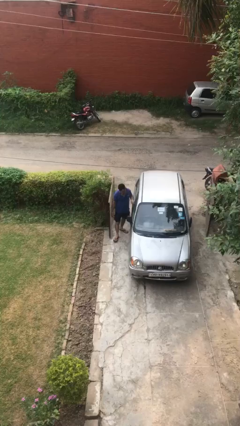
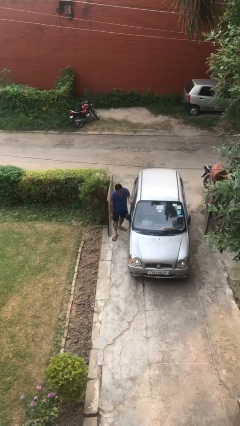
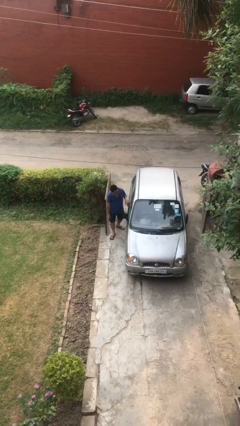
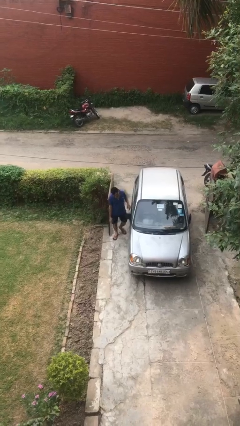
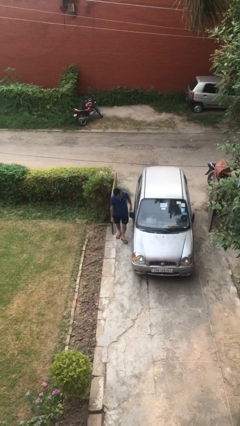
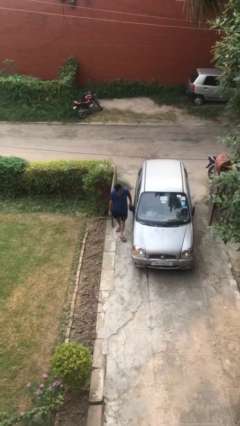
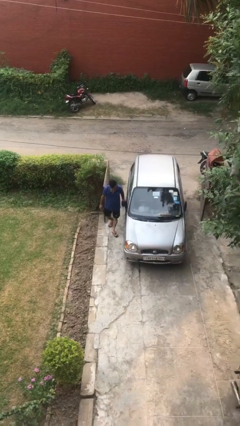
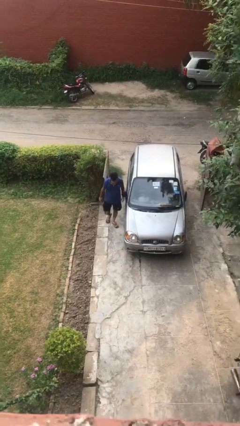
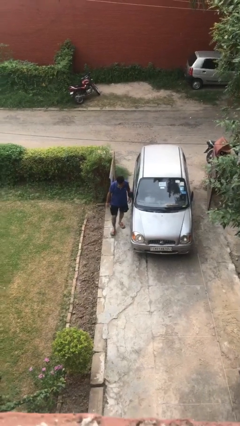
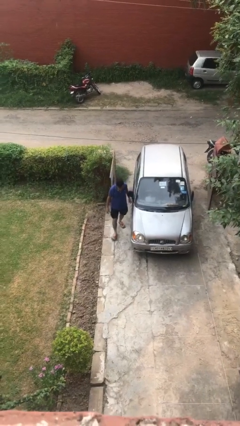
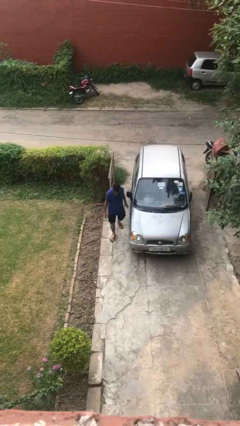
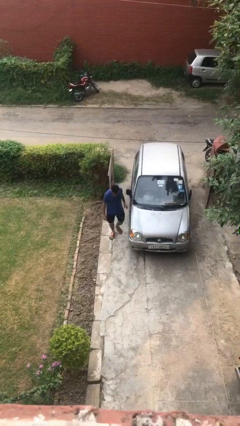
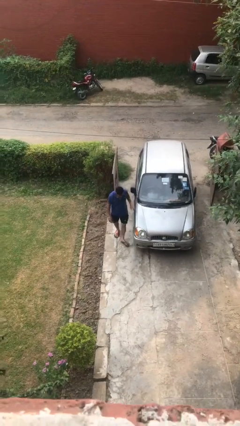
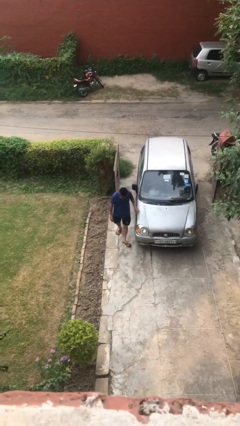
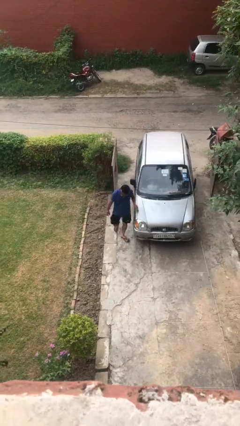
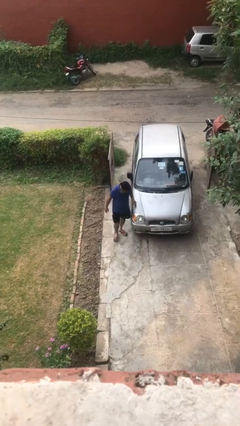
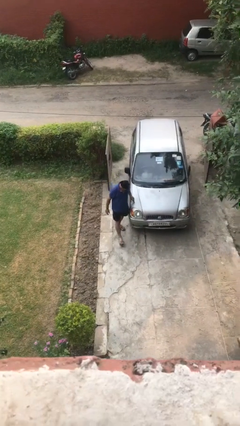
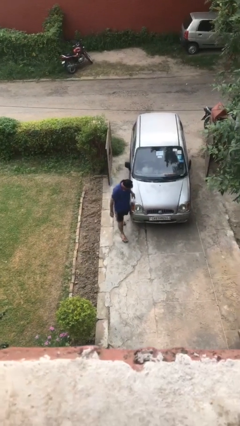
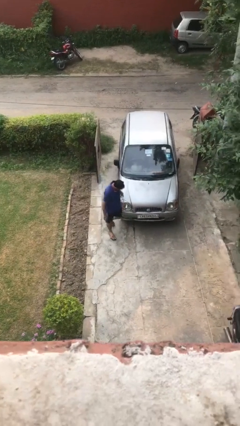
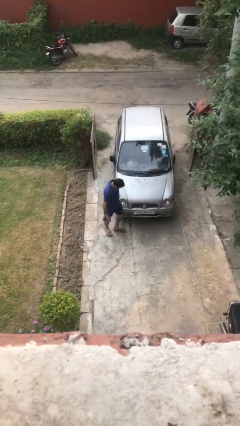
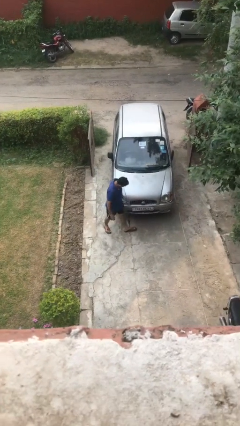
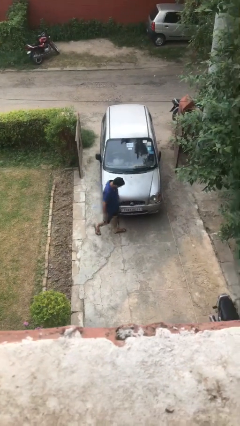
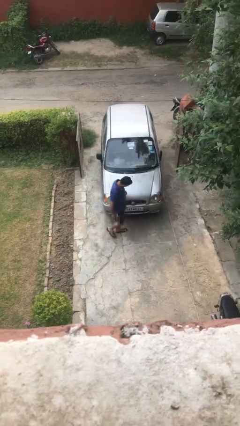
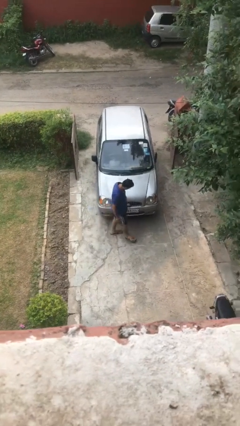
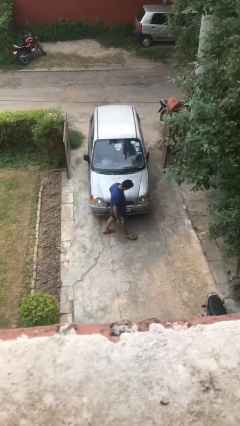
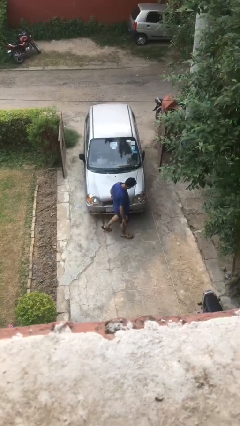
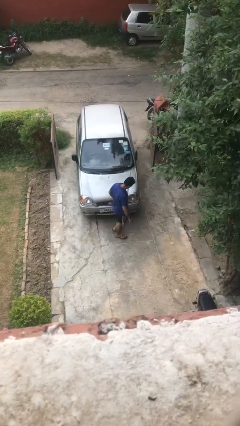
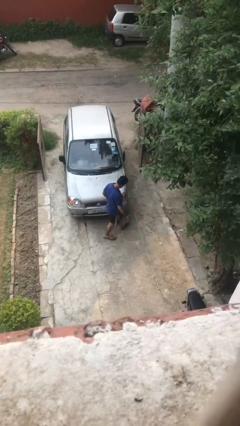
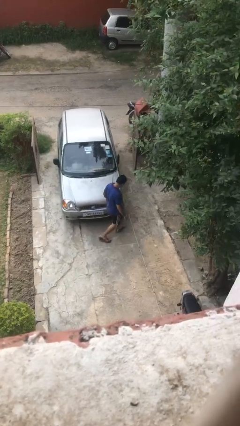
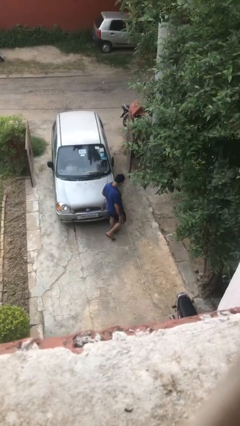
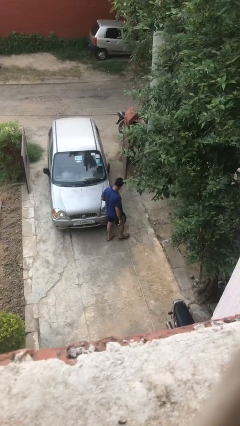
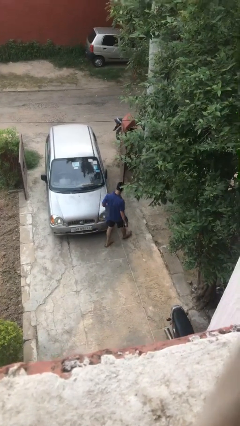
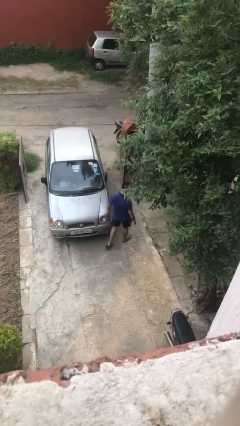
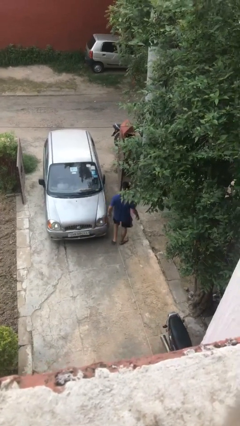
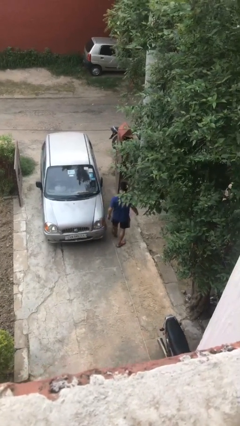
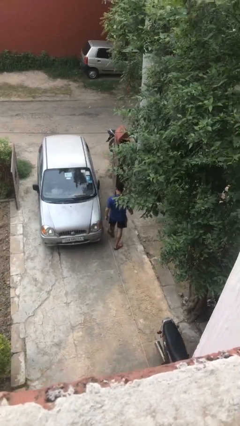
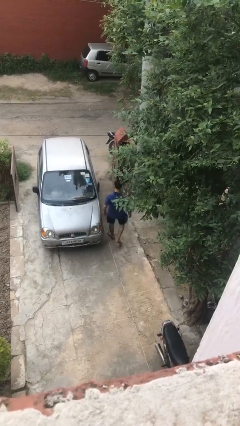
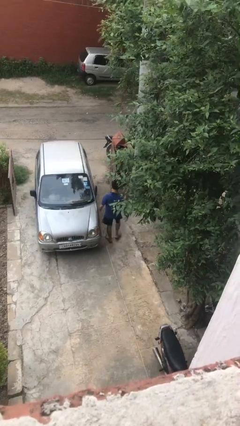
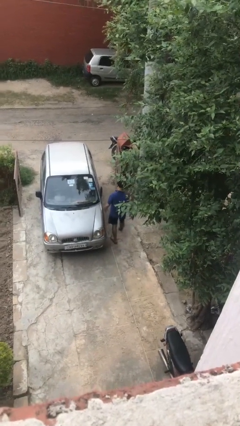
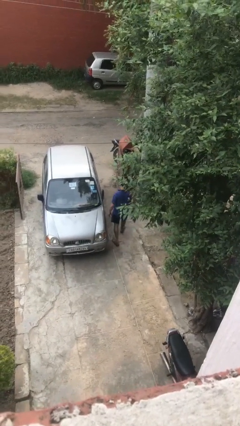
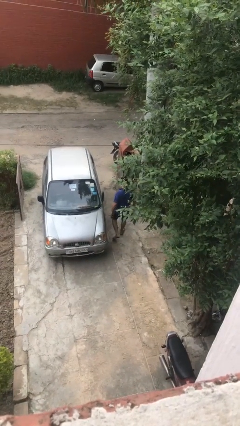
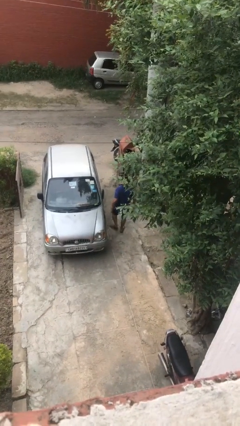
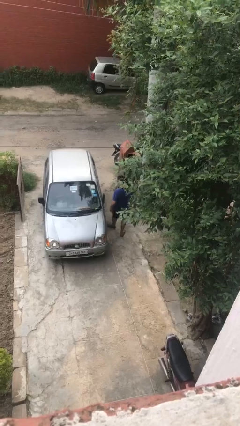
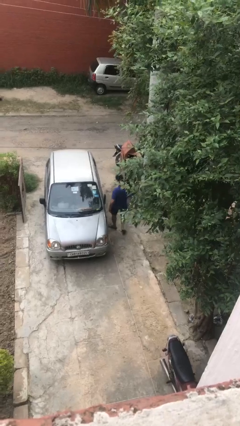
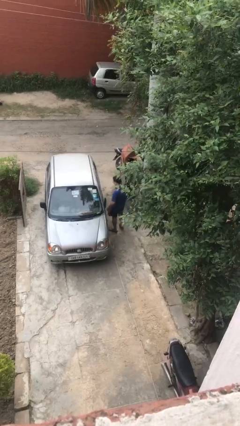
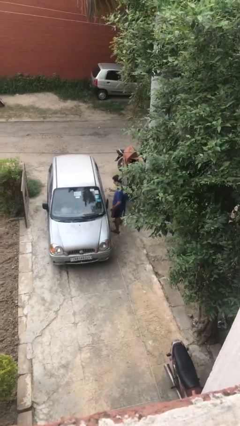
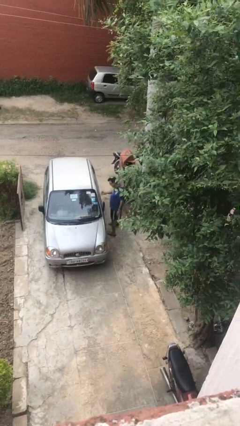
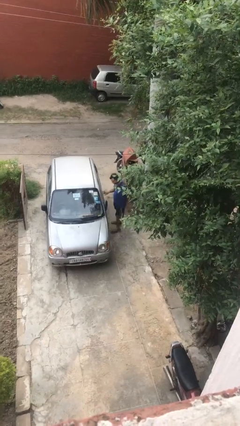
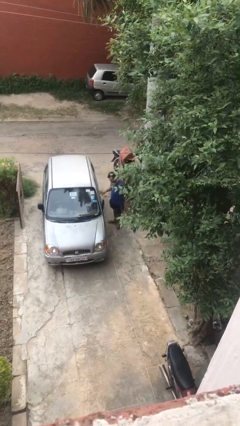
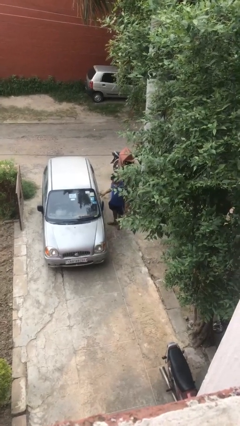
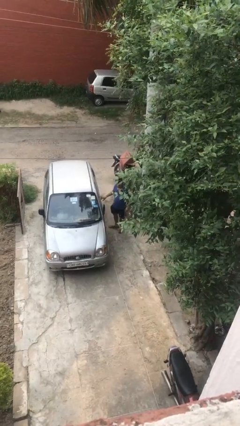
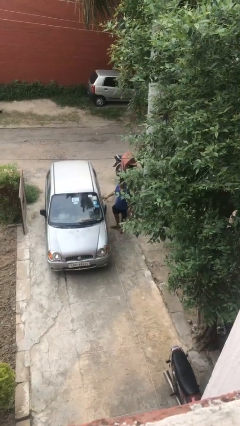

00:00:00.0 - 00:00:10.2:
person walks around car

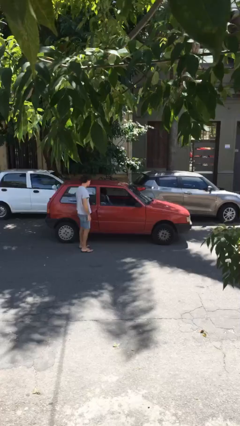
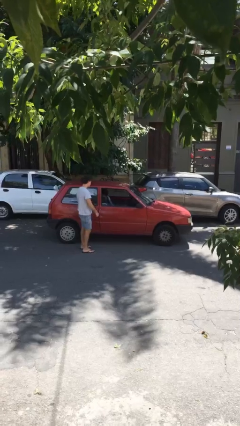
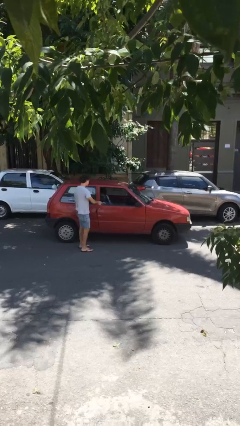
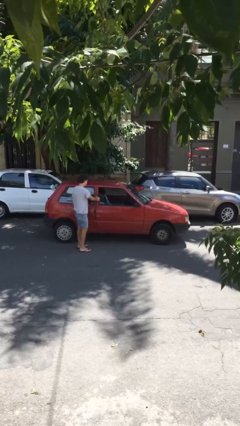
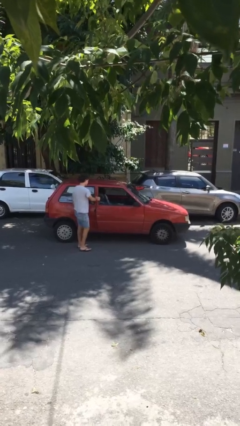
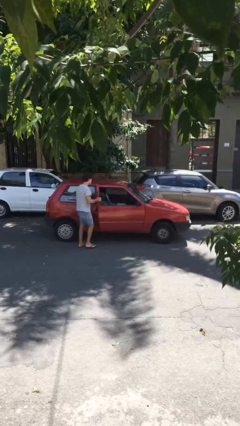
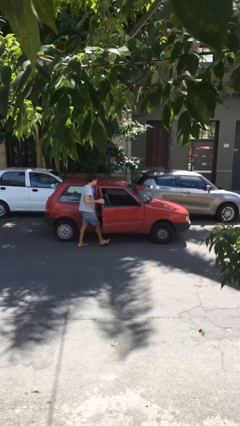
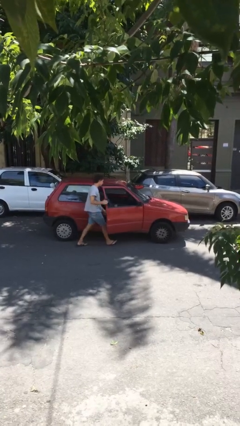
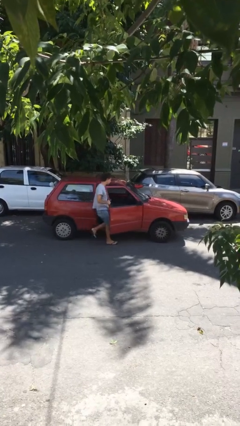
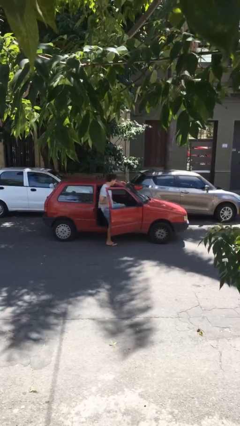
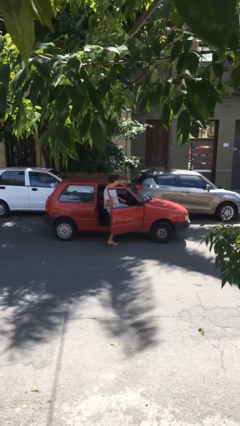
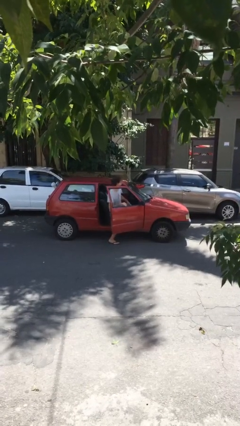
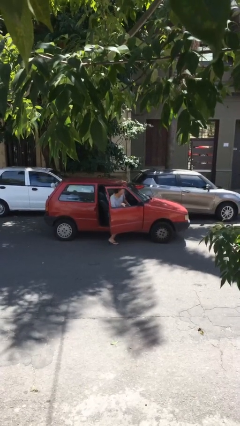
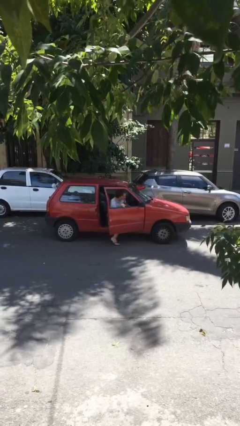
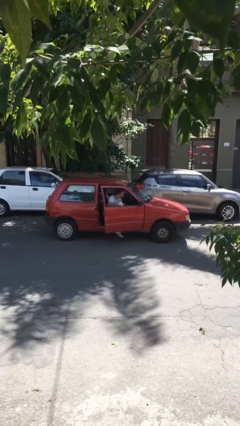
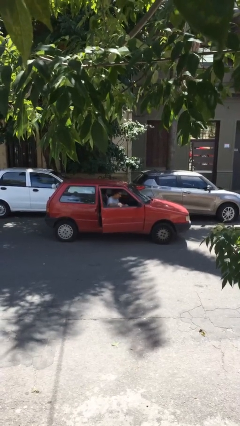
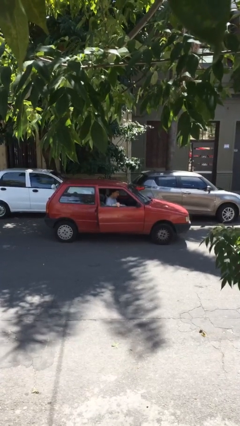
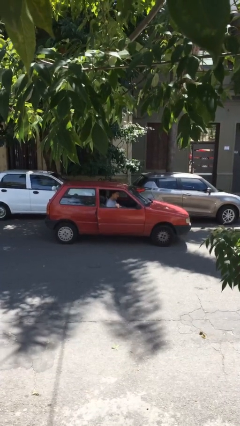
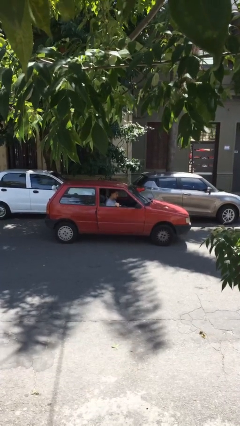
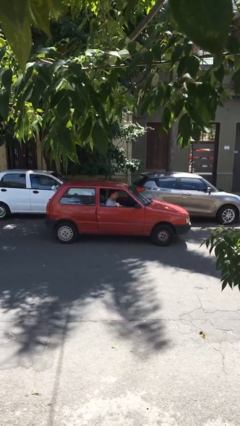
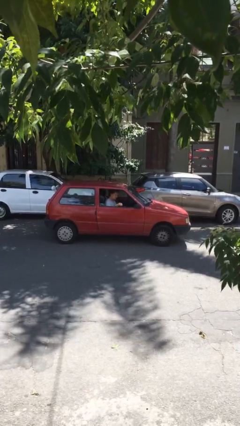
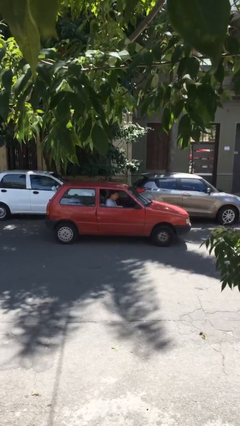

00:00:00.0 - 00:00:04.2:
car picks up person

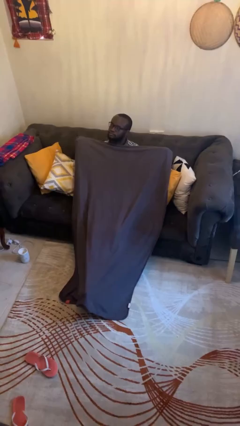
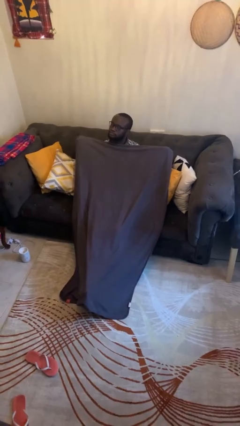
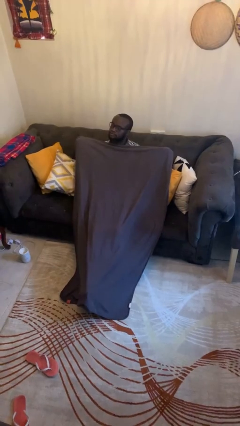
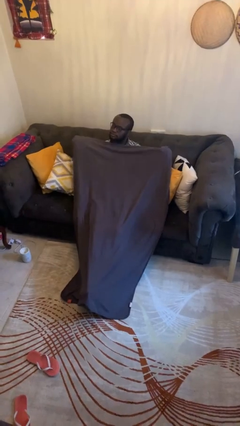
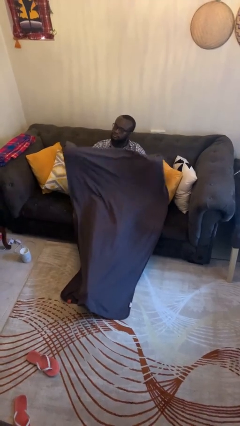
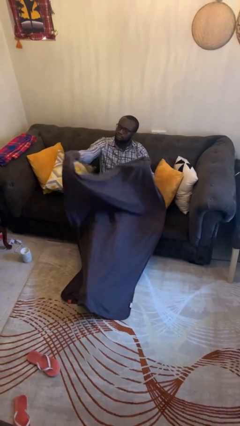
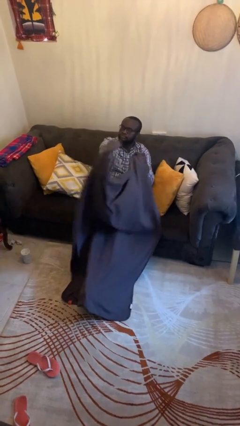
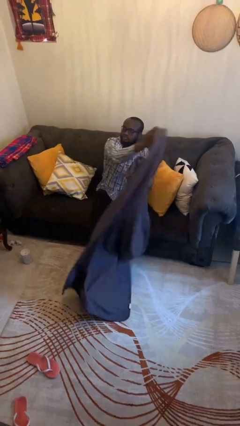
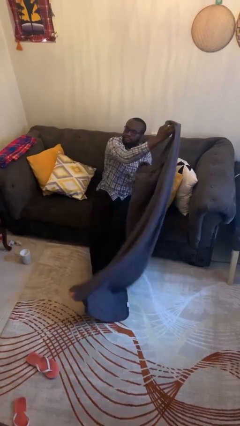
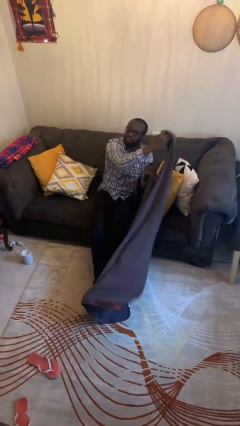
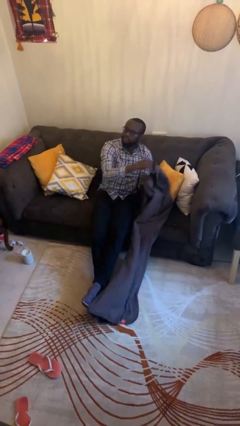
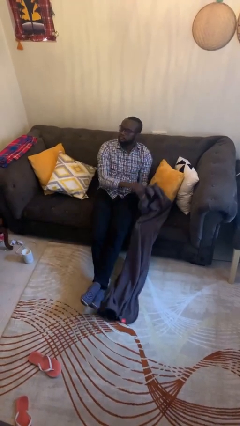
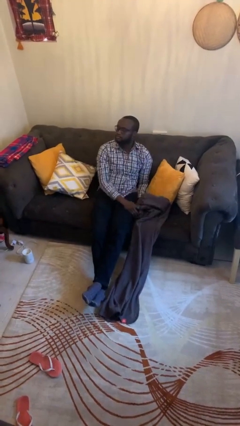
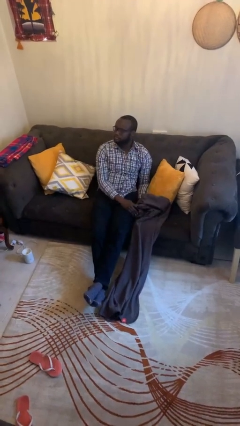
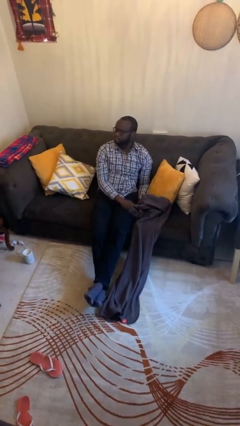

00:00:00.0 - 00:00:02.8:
person uncovers with blanket

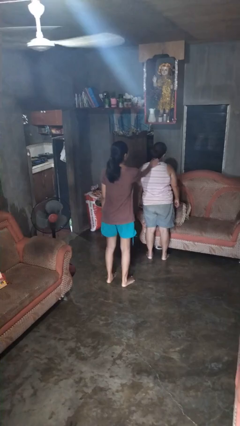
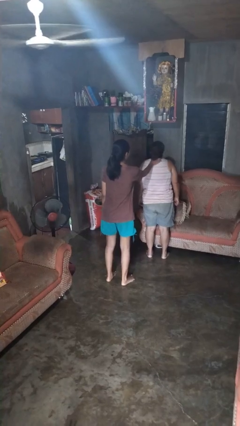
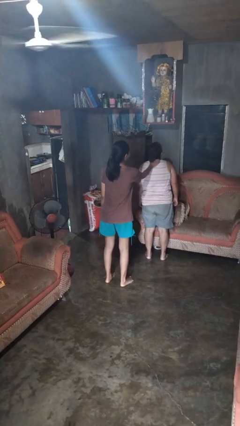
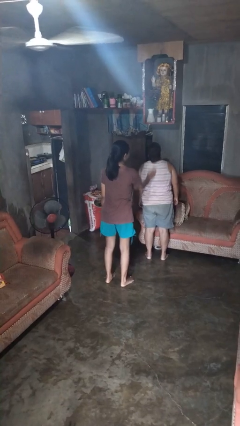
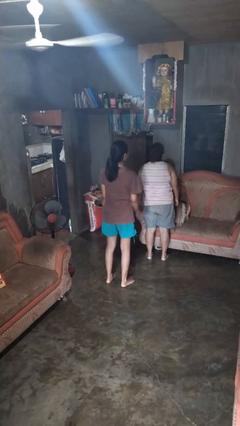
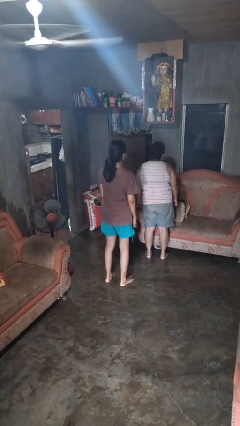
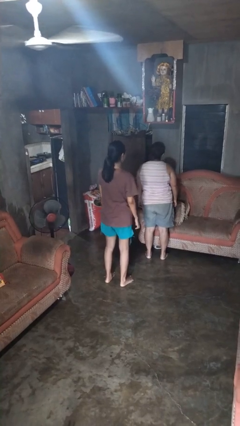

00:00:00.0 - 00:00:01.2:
person tickles person
